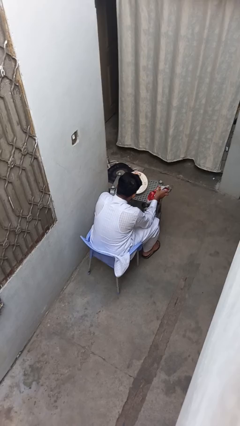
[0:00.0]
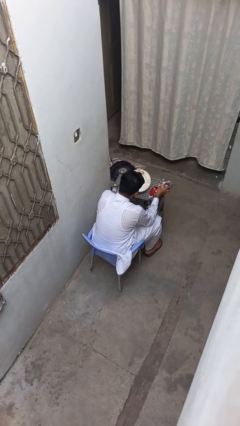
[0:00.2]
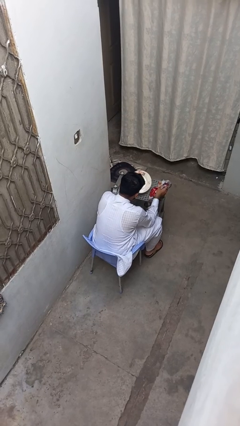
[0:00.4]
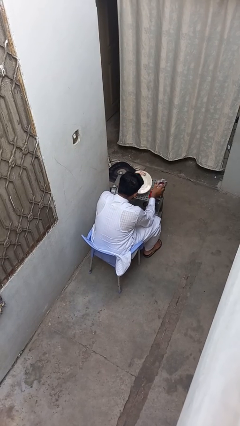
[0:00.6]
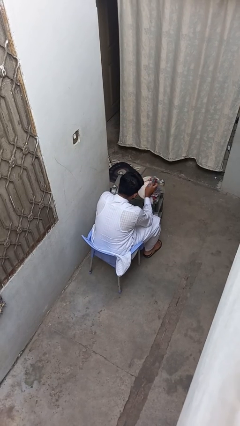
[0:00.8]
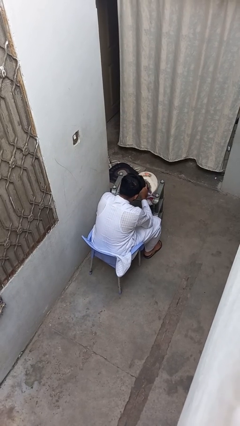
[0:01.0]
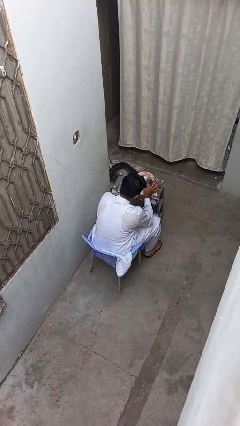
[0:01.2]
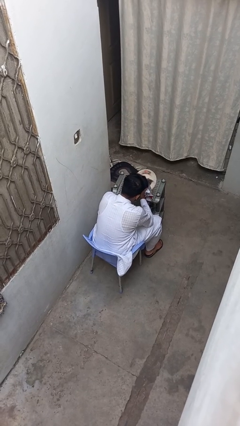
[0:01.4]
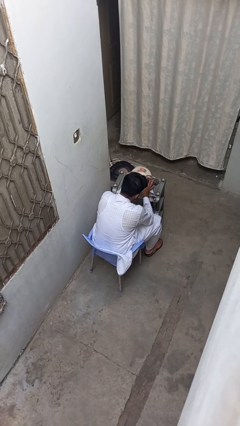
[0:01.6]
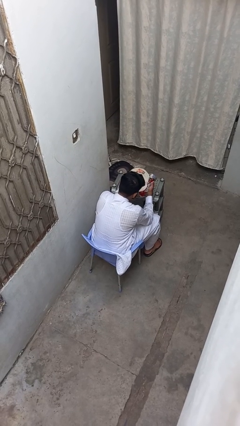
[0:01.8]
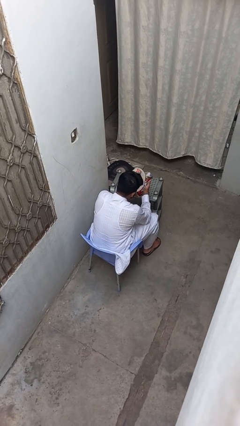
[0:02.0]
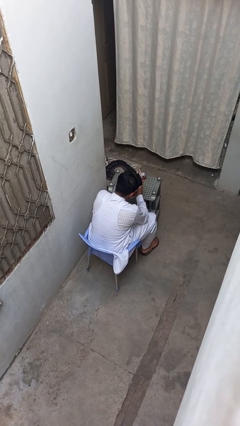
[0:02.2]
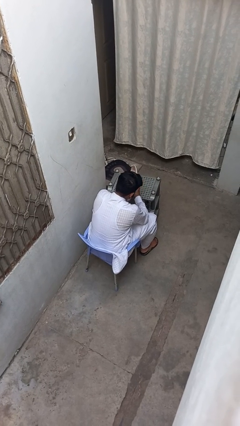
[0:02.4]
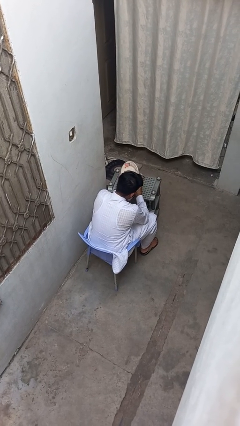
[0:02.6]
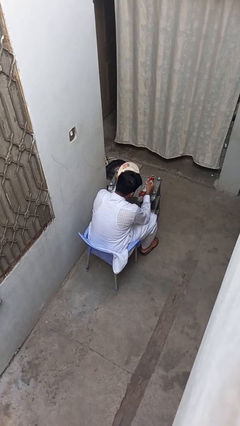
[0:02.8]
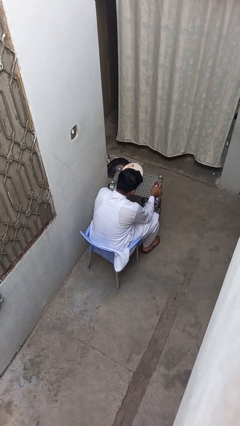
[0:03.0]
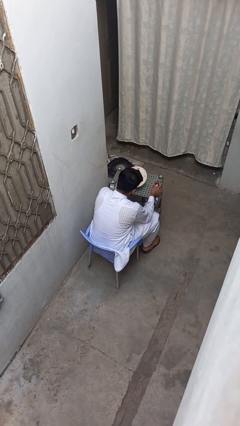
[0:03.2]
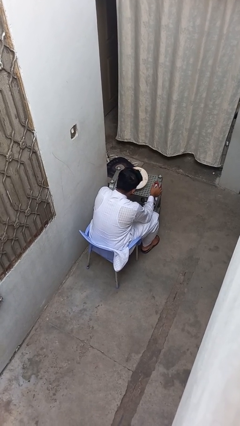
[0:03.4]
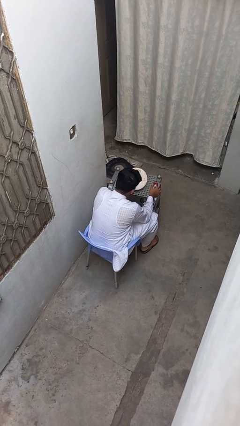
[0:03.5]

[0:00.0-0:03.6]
person dries dish

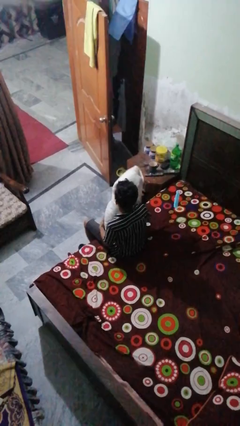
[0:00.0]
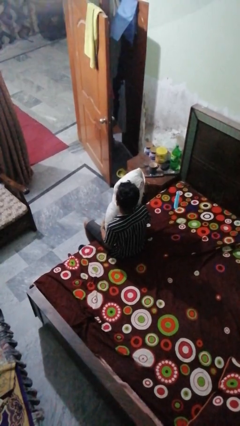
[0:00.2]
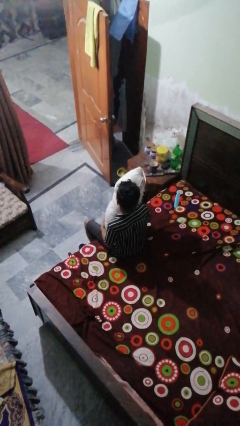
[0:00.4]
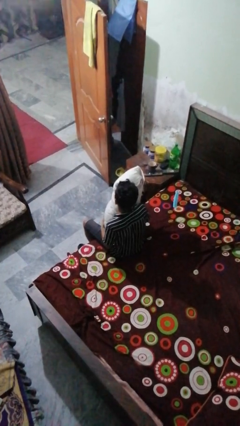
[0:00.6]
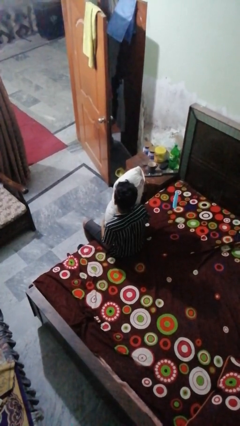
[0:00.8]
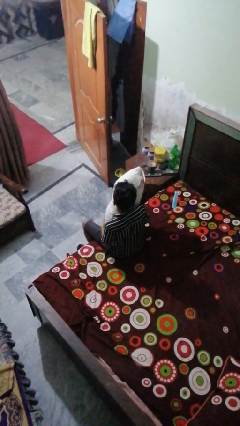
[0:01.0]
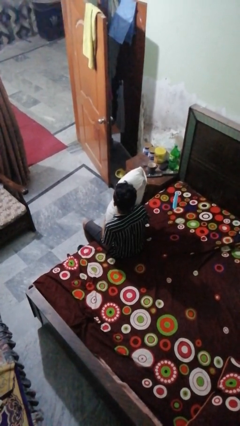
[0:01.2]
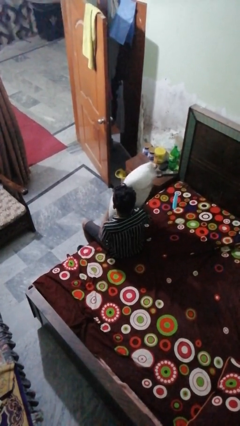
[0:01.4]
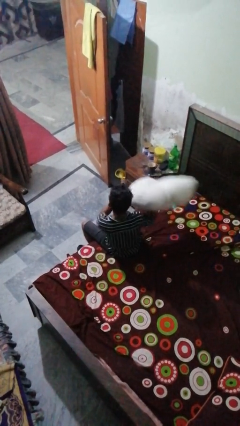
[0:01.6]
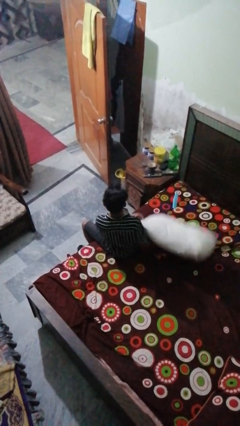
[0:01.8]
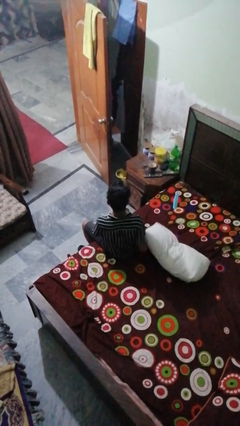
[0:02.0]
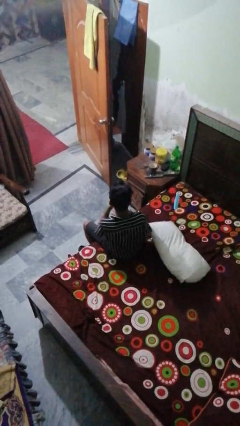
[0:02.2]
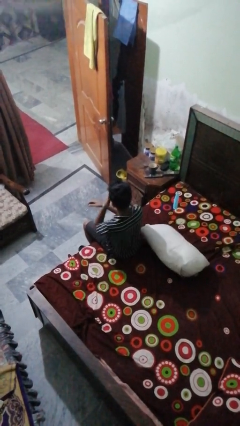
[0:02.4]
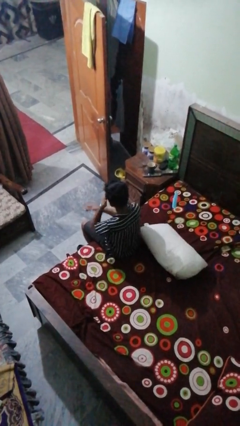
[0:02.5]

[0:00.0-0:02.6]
person throws object on bed

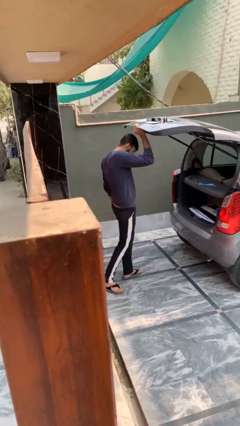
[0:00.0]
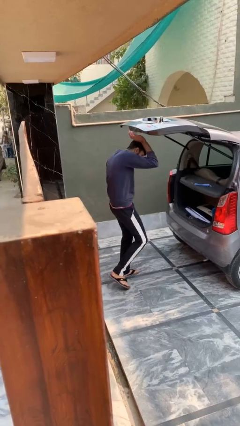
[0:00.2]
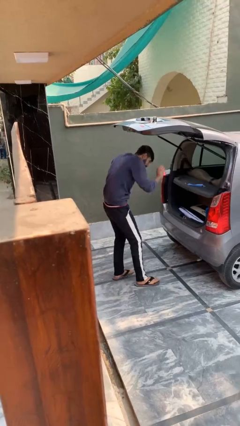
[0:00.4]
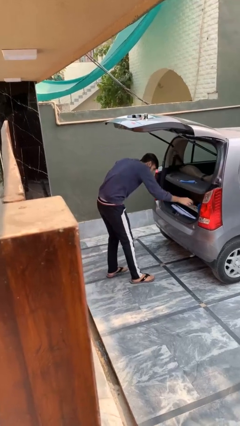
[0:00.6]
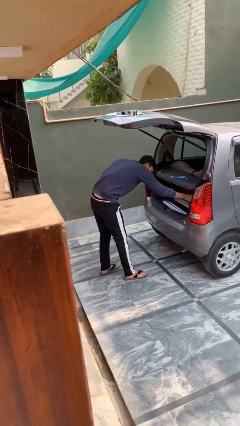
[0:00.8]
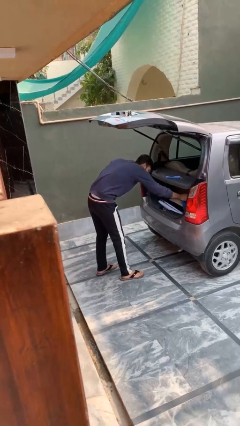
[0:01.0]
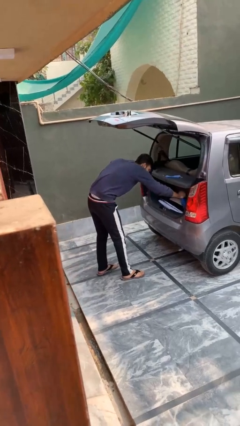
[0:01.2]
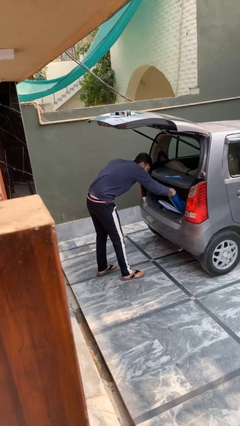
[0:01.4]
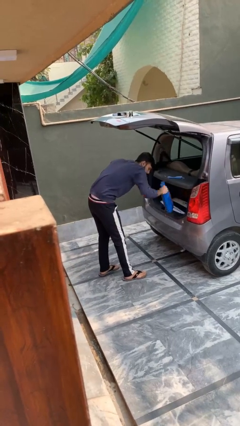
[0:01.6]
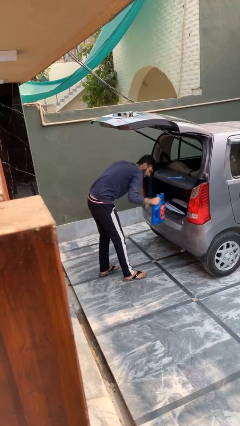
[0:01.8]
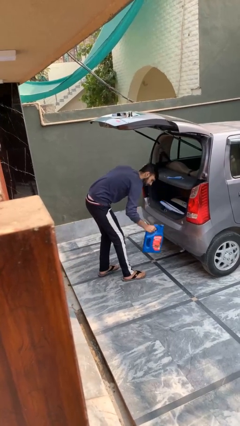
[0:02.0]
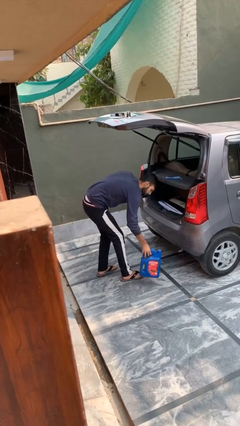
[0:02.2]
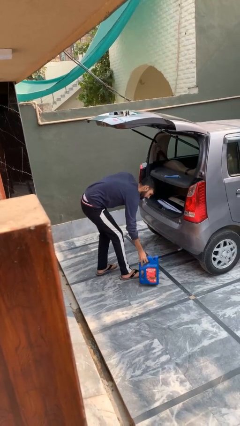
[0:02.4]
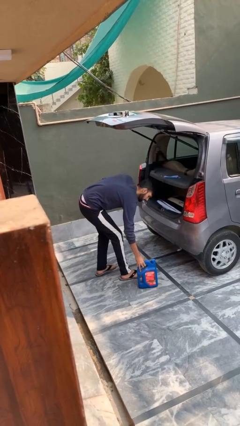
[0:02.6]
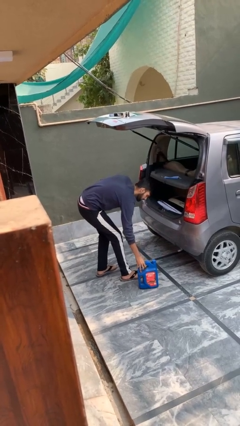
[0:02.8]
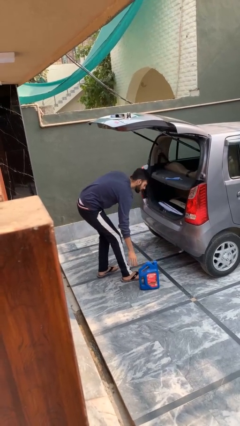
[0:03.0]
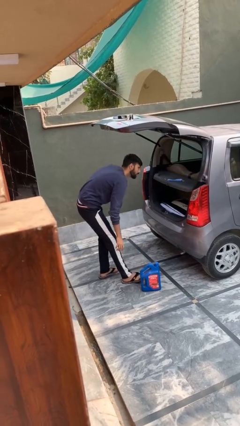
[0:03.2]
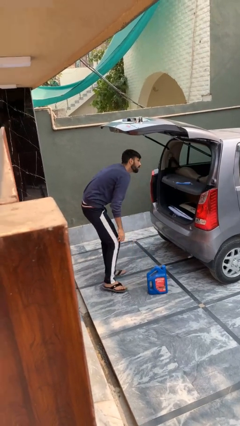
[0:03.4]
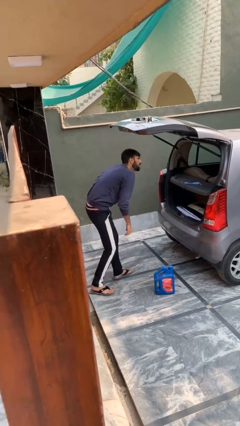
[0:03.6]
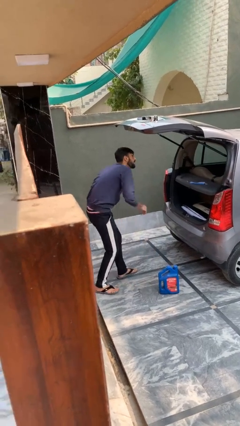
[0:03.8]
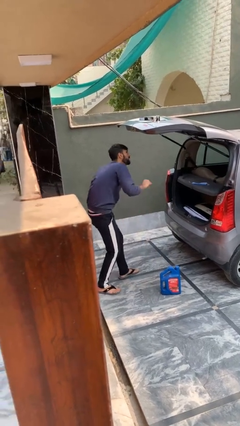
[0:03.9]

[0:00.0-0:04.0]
person unloads car

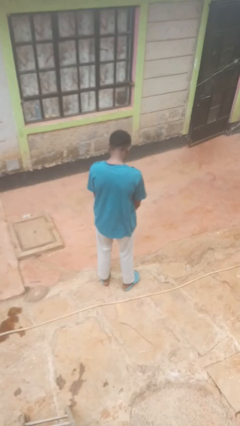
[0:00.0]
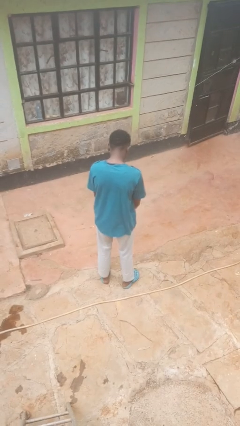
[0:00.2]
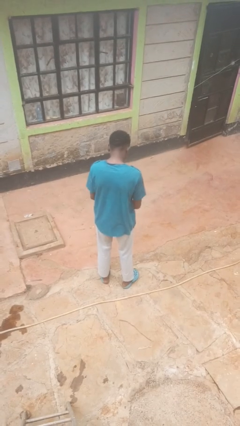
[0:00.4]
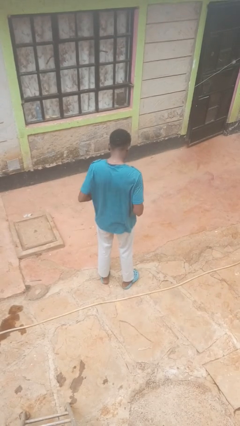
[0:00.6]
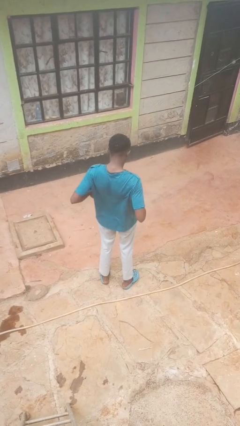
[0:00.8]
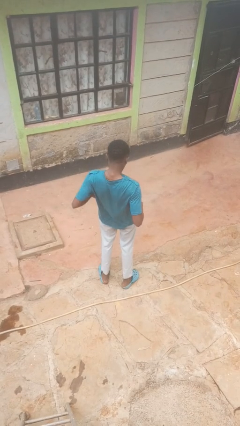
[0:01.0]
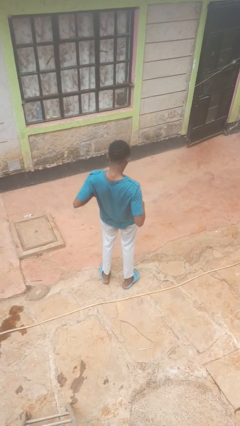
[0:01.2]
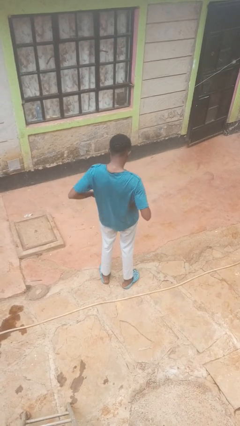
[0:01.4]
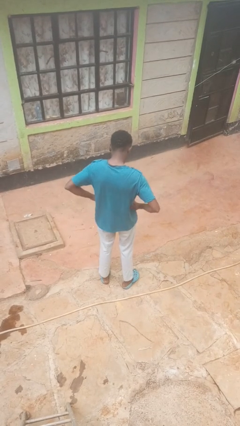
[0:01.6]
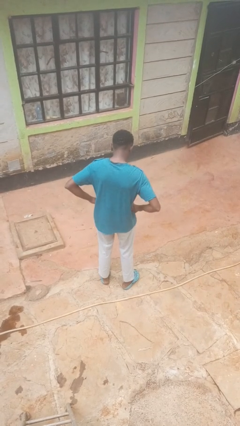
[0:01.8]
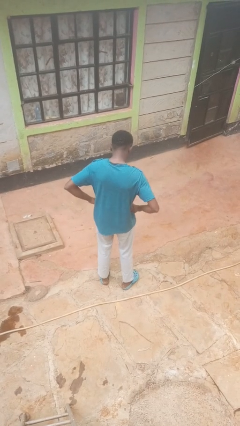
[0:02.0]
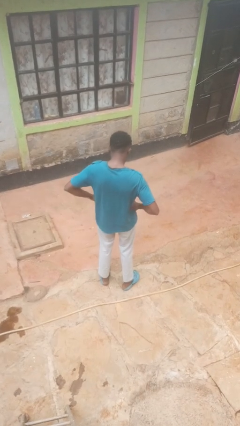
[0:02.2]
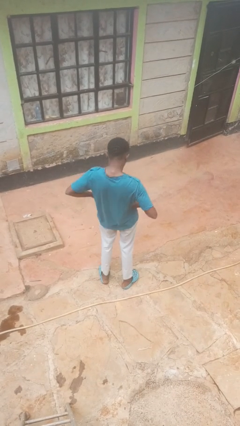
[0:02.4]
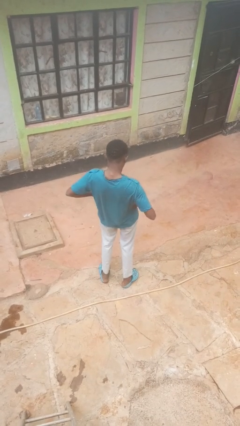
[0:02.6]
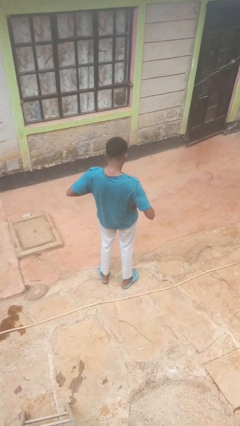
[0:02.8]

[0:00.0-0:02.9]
person wiggles hips

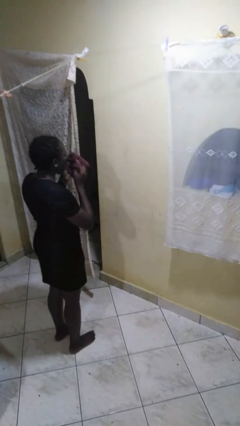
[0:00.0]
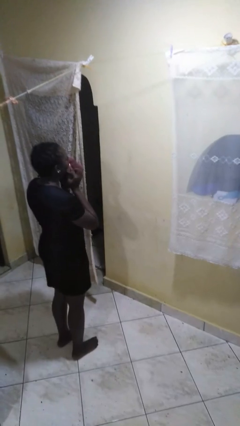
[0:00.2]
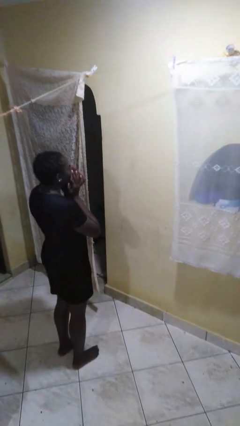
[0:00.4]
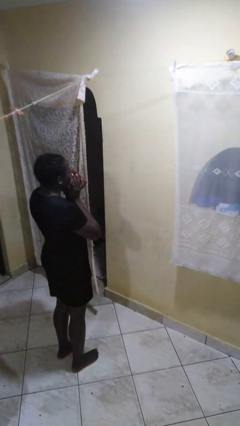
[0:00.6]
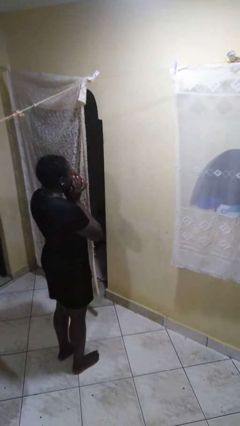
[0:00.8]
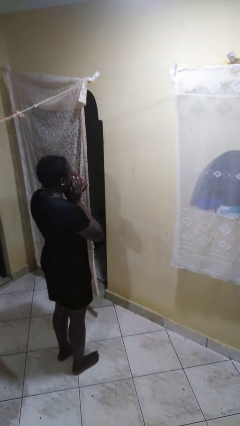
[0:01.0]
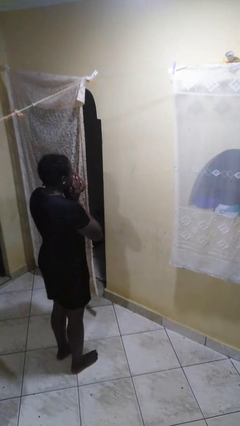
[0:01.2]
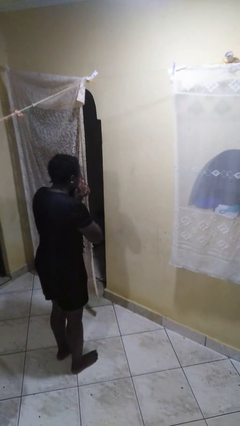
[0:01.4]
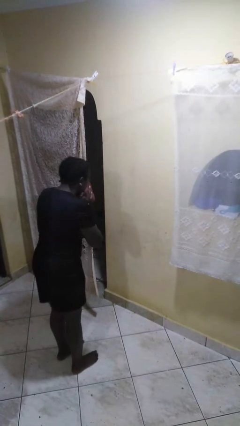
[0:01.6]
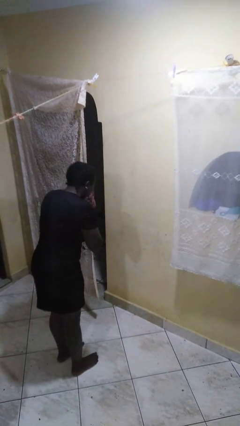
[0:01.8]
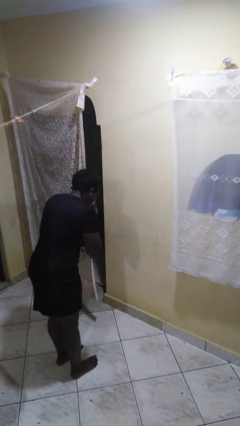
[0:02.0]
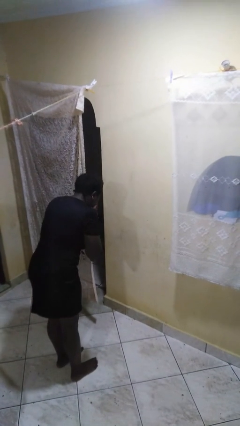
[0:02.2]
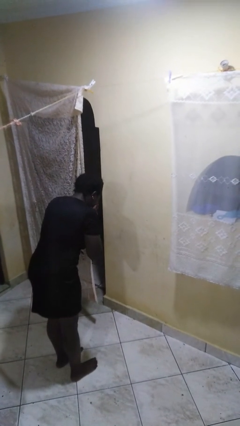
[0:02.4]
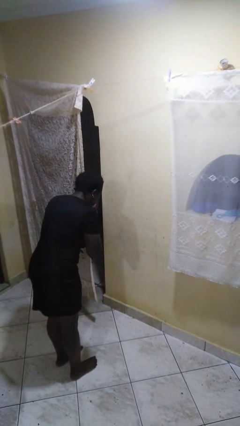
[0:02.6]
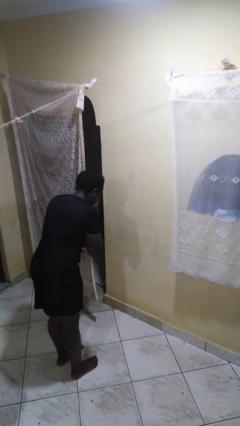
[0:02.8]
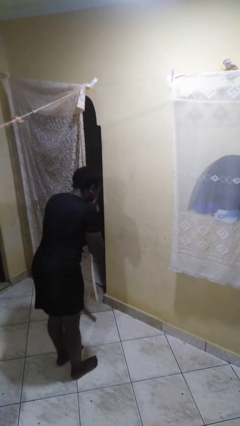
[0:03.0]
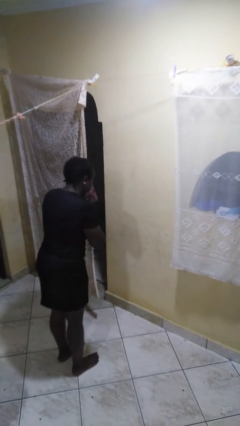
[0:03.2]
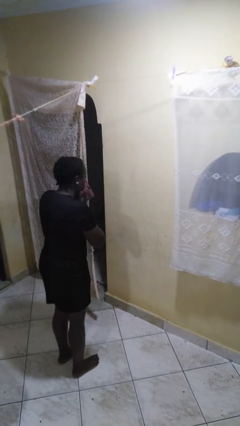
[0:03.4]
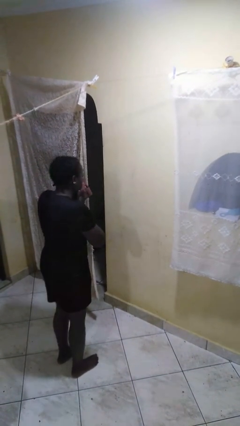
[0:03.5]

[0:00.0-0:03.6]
person blows nose

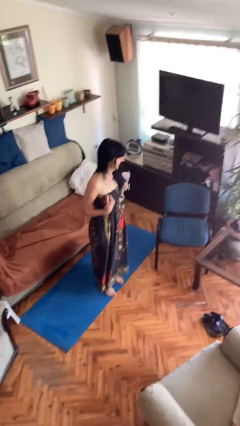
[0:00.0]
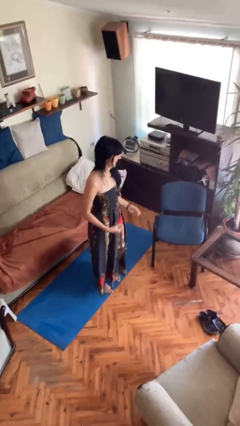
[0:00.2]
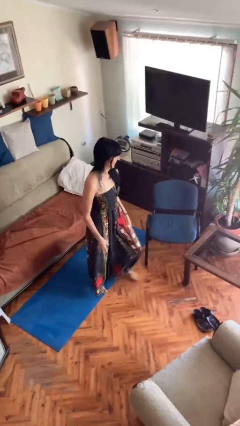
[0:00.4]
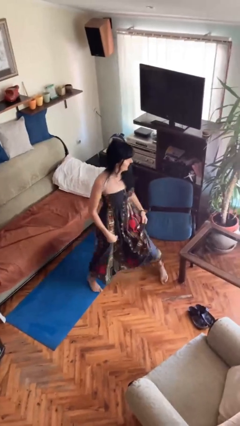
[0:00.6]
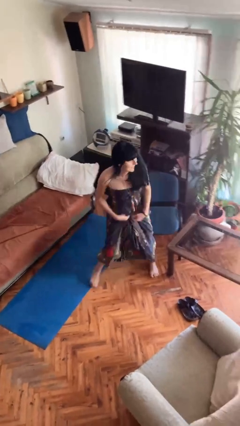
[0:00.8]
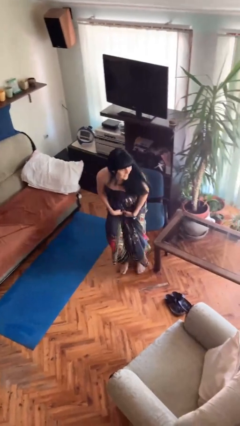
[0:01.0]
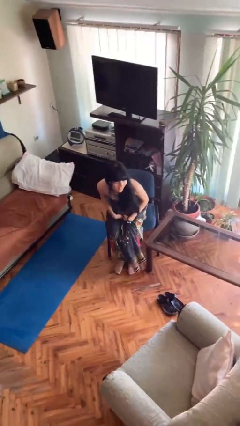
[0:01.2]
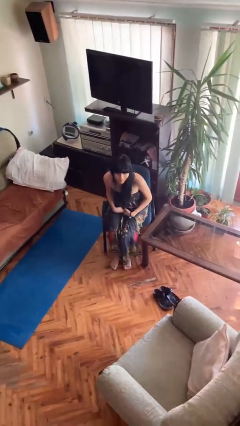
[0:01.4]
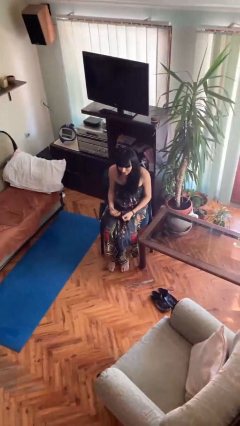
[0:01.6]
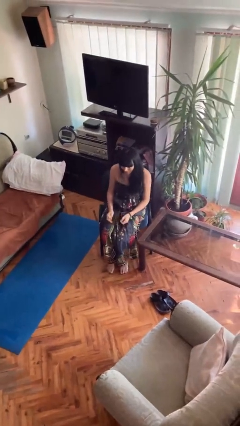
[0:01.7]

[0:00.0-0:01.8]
person sits down
